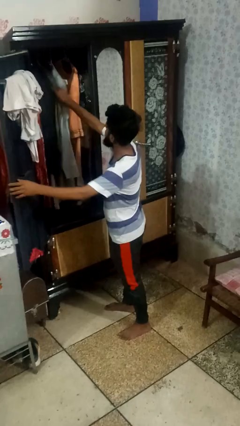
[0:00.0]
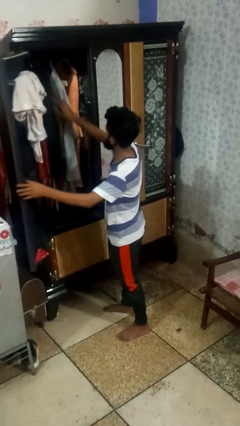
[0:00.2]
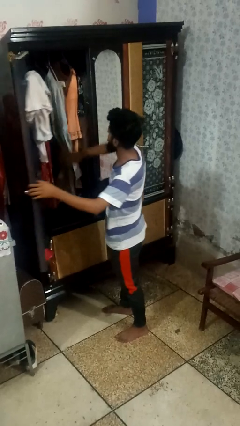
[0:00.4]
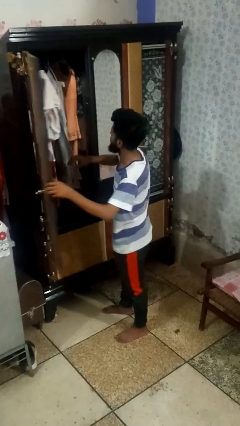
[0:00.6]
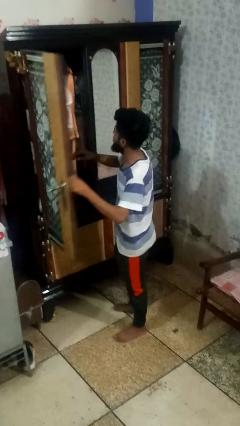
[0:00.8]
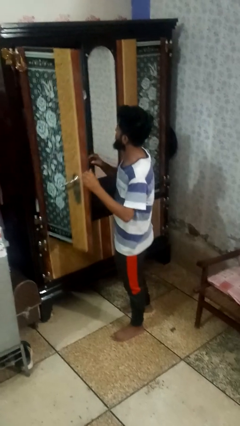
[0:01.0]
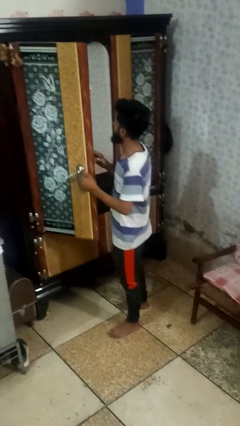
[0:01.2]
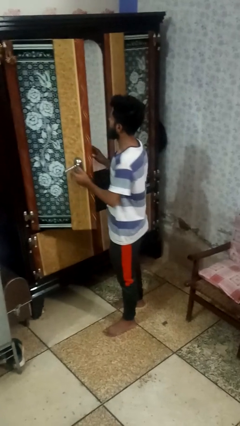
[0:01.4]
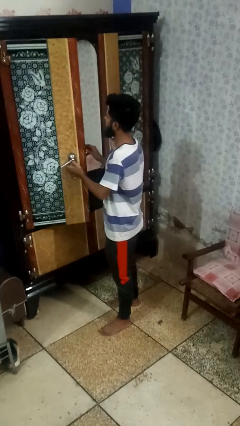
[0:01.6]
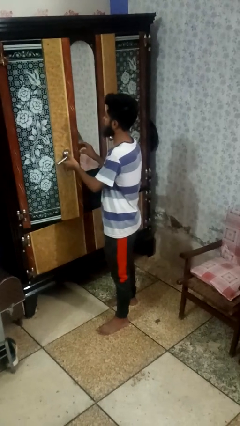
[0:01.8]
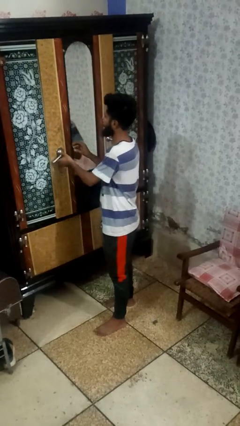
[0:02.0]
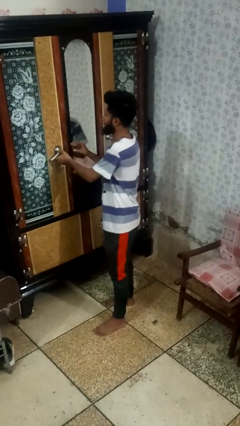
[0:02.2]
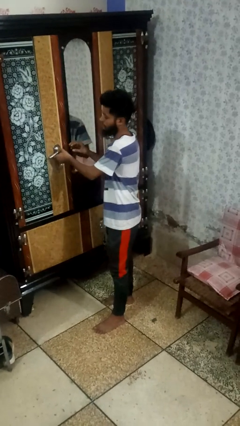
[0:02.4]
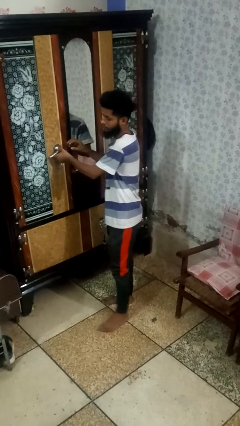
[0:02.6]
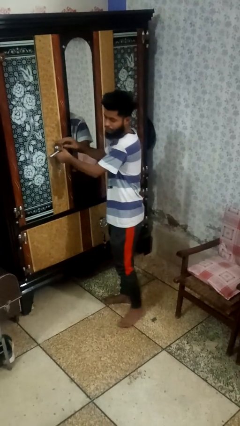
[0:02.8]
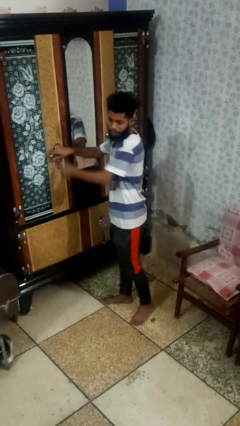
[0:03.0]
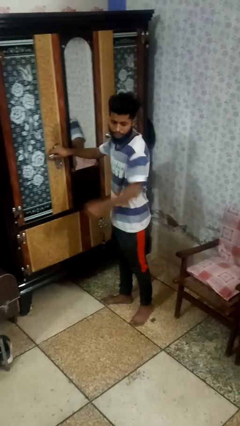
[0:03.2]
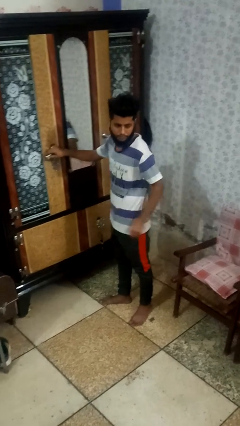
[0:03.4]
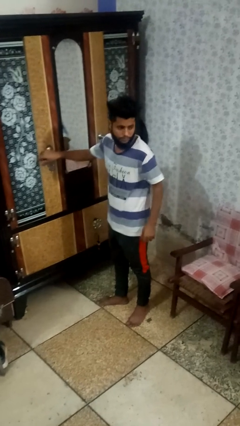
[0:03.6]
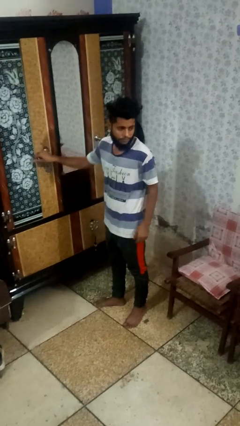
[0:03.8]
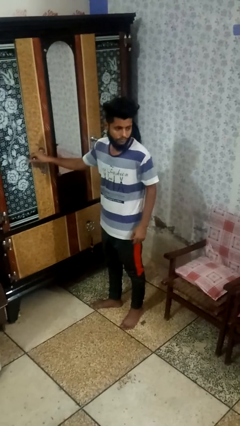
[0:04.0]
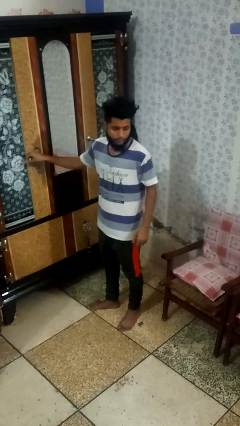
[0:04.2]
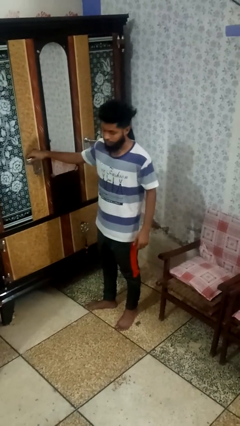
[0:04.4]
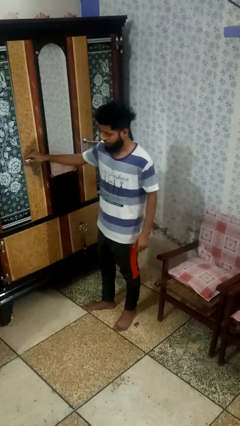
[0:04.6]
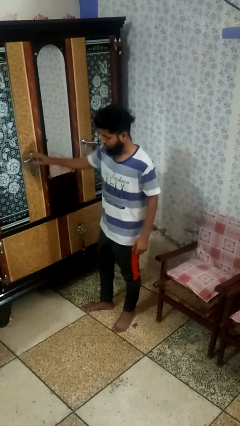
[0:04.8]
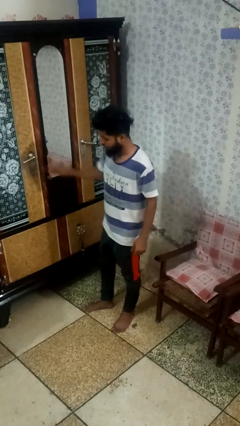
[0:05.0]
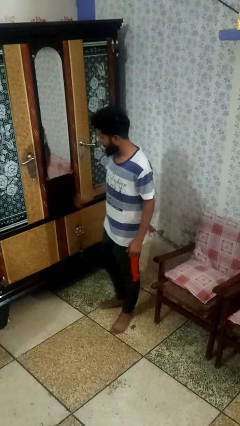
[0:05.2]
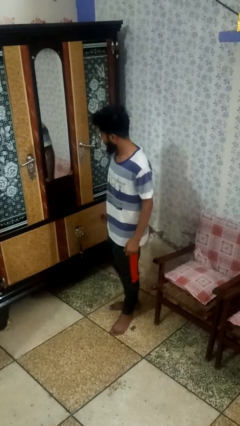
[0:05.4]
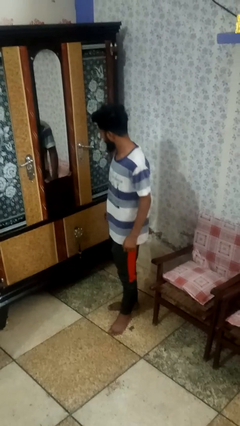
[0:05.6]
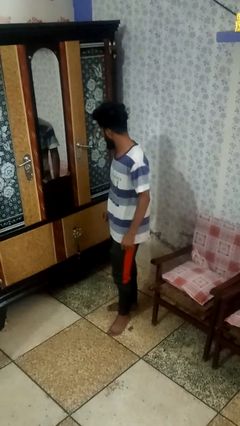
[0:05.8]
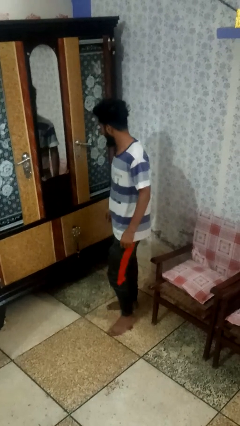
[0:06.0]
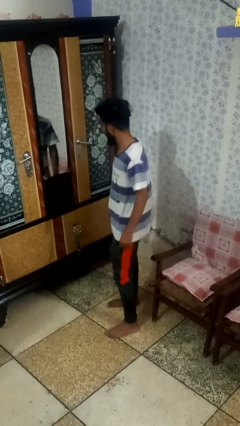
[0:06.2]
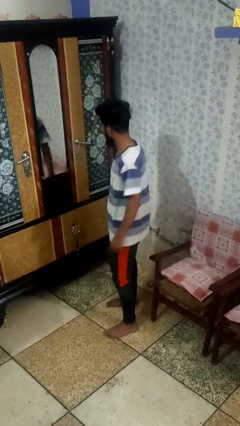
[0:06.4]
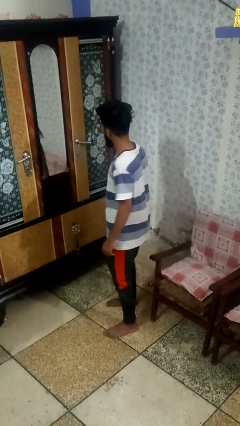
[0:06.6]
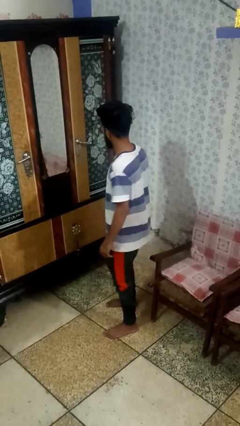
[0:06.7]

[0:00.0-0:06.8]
person closes dresser drawer

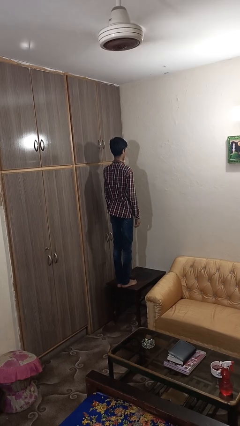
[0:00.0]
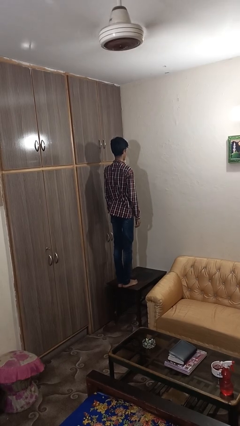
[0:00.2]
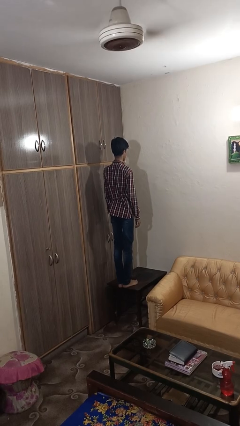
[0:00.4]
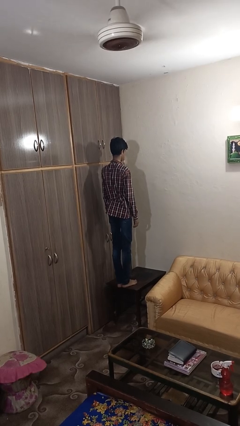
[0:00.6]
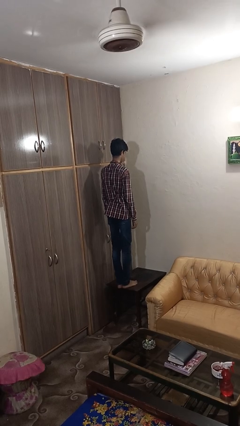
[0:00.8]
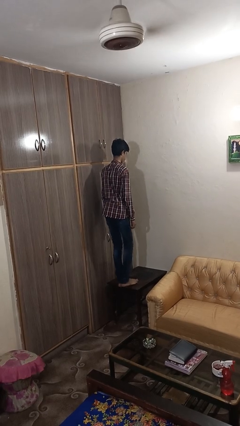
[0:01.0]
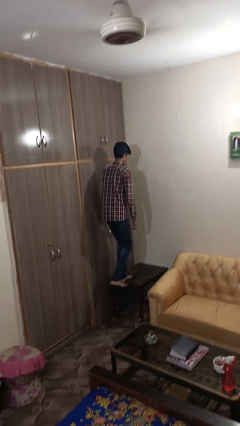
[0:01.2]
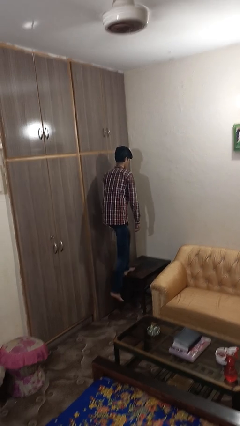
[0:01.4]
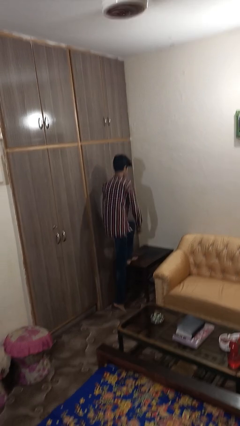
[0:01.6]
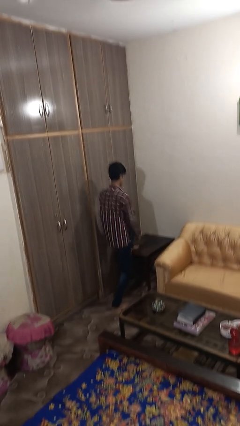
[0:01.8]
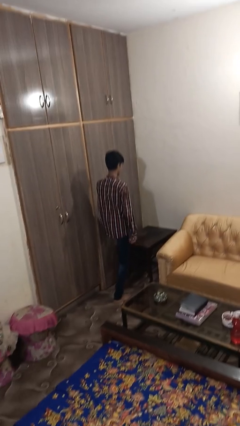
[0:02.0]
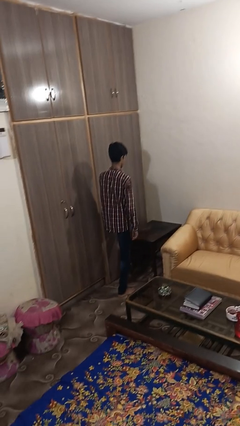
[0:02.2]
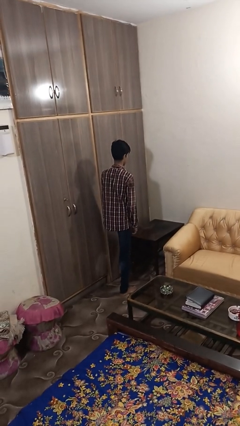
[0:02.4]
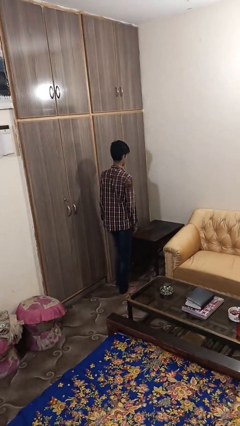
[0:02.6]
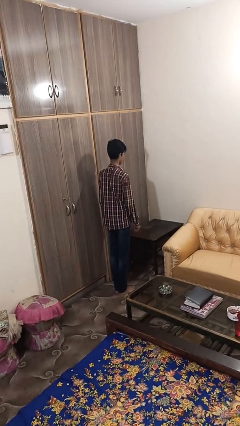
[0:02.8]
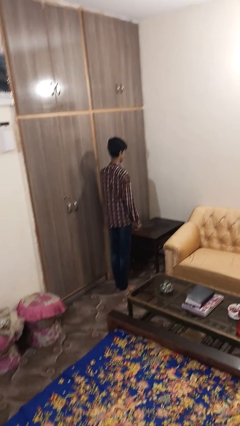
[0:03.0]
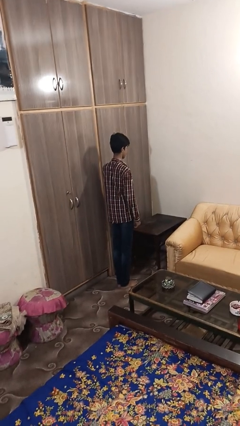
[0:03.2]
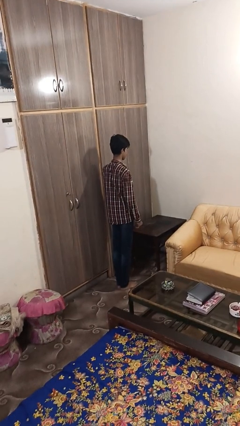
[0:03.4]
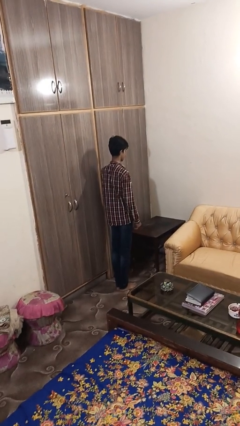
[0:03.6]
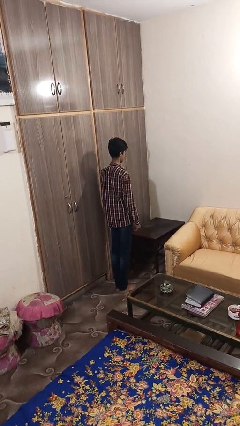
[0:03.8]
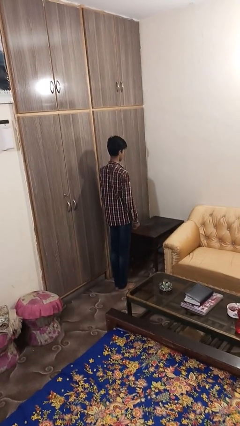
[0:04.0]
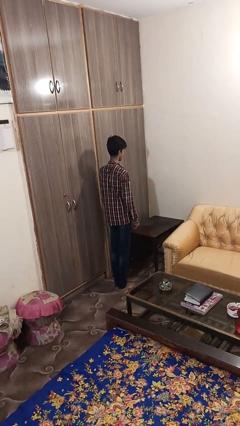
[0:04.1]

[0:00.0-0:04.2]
person climbs off table

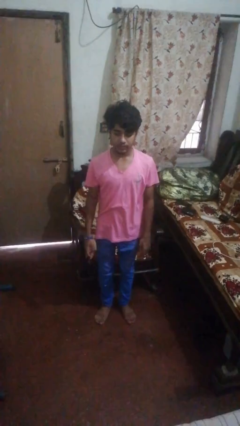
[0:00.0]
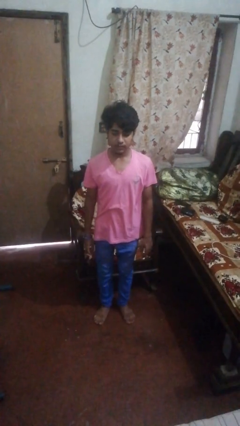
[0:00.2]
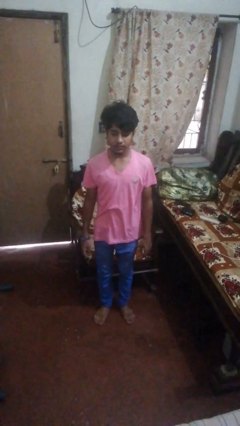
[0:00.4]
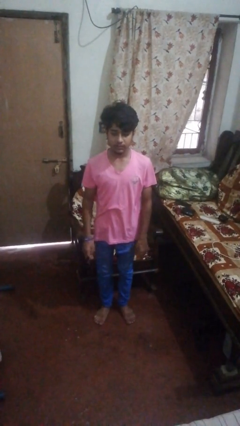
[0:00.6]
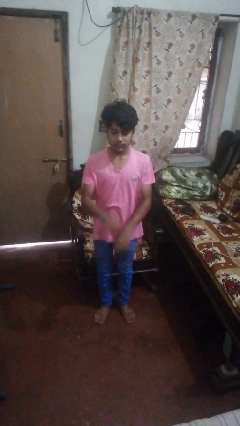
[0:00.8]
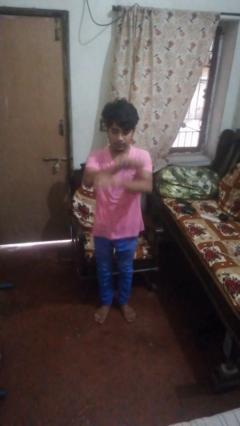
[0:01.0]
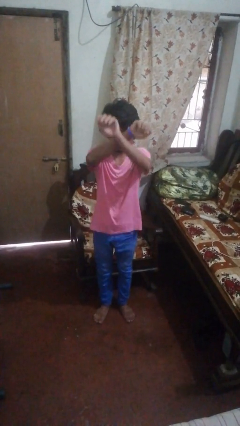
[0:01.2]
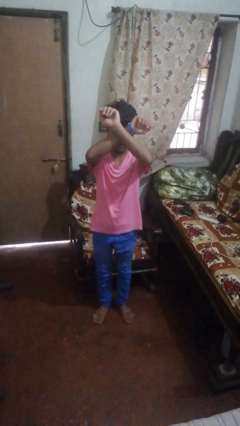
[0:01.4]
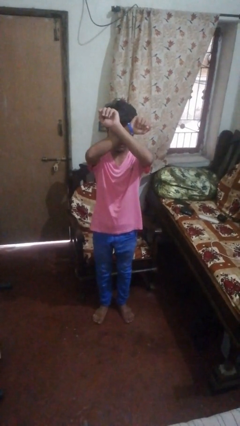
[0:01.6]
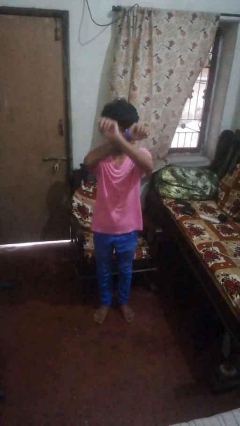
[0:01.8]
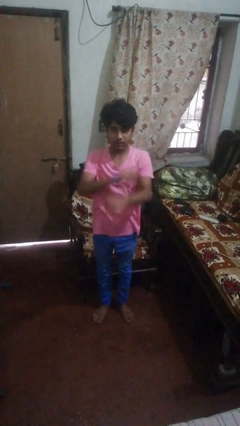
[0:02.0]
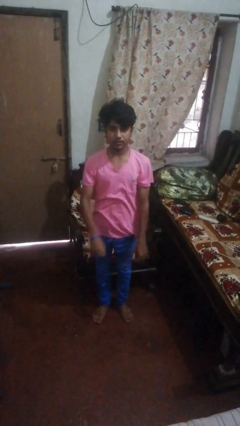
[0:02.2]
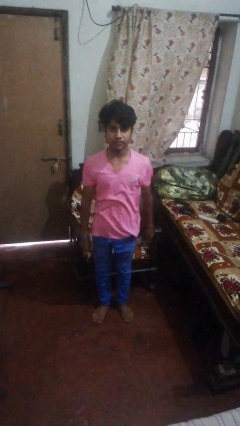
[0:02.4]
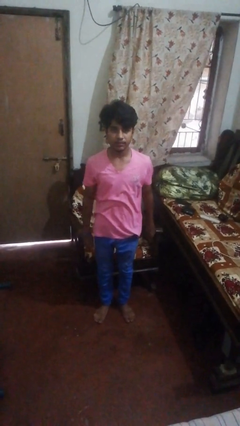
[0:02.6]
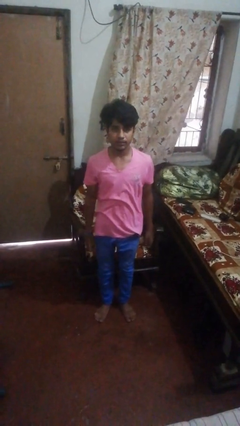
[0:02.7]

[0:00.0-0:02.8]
person karate chop

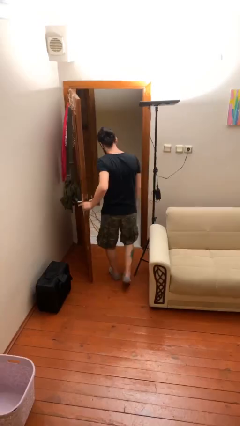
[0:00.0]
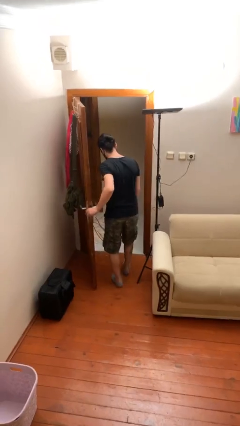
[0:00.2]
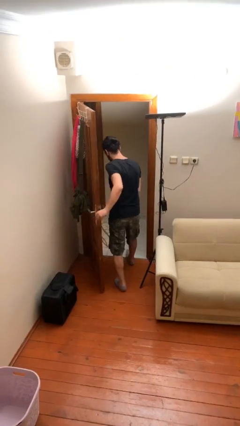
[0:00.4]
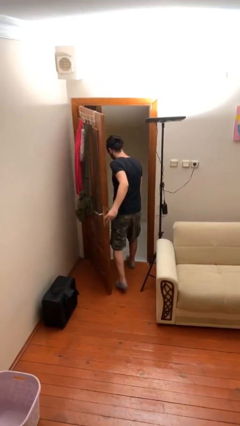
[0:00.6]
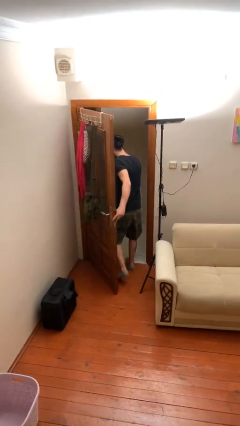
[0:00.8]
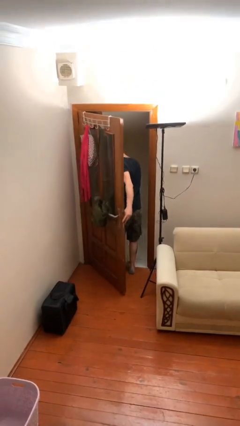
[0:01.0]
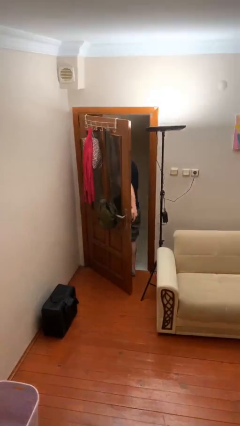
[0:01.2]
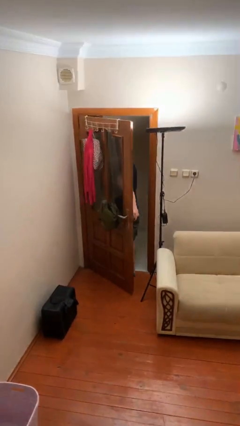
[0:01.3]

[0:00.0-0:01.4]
person exits scene through structure

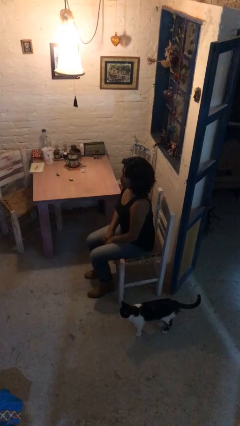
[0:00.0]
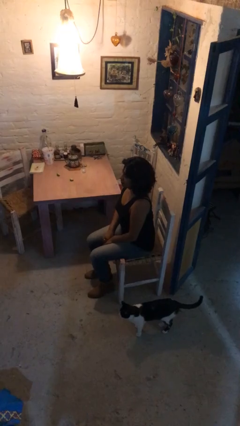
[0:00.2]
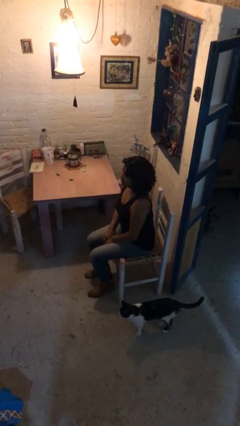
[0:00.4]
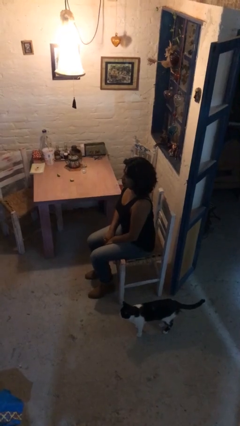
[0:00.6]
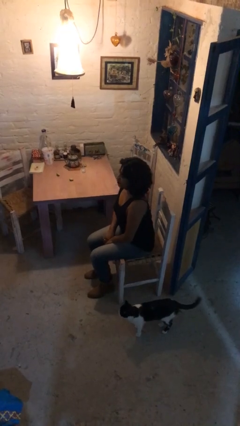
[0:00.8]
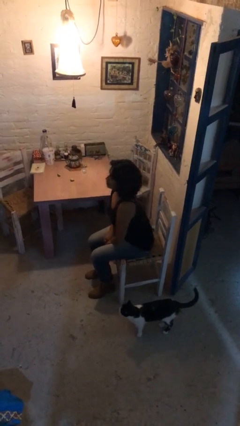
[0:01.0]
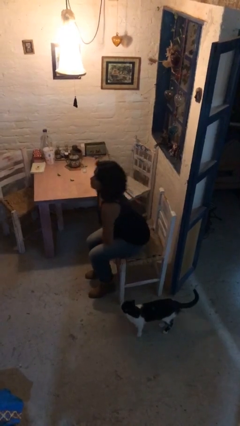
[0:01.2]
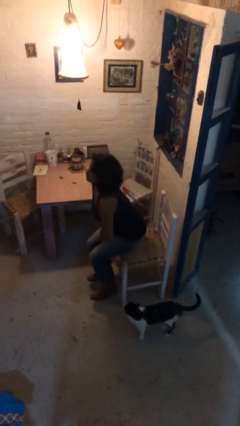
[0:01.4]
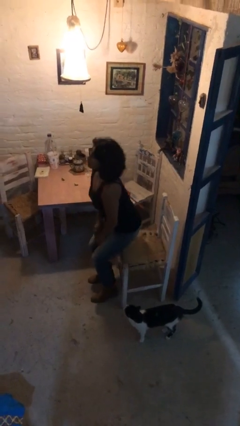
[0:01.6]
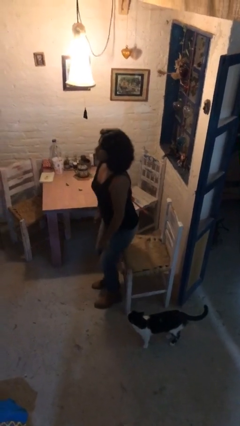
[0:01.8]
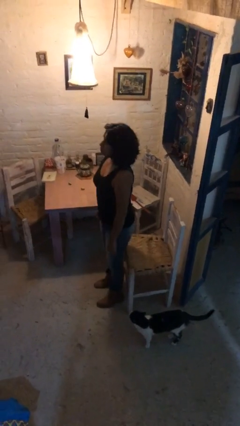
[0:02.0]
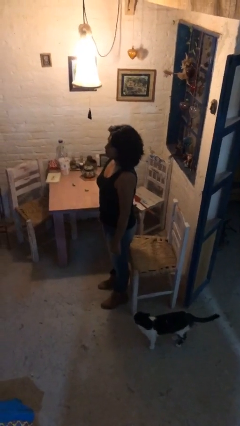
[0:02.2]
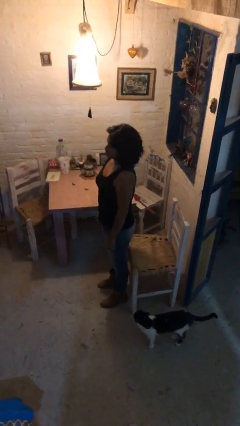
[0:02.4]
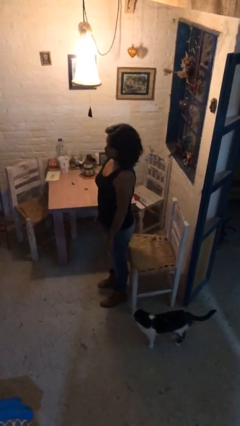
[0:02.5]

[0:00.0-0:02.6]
person stands up
